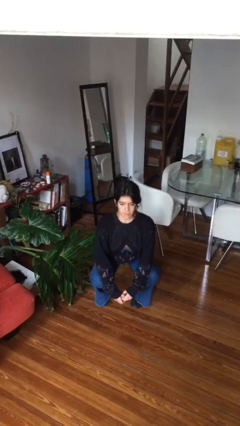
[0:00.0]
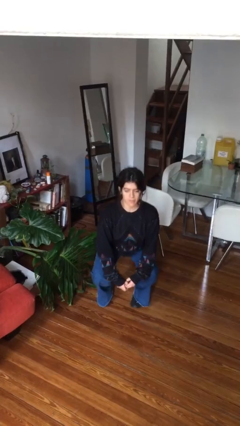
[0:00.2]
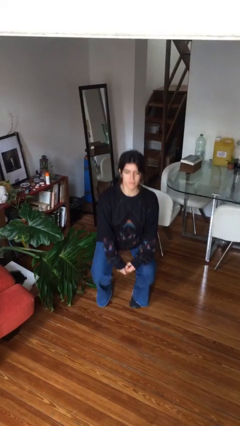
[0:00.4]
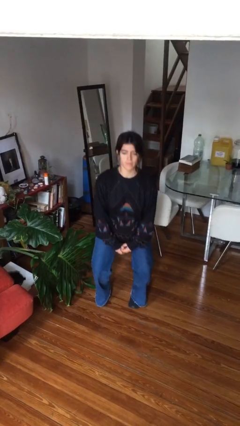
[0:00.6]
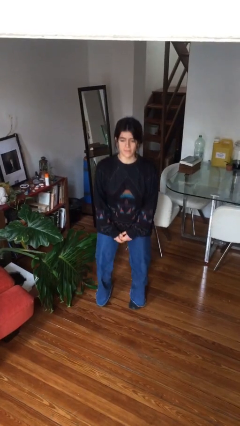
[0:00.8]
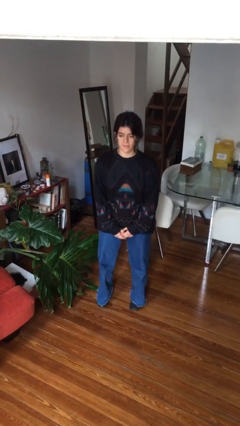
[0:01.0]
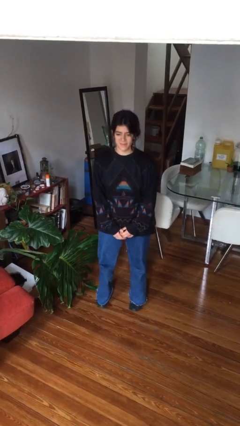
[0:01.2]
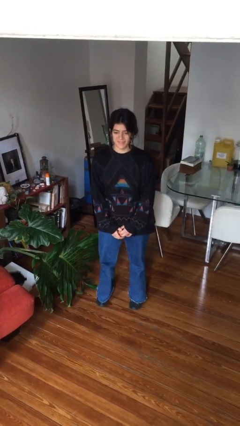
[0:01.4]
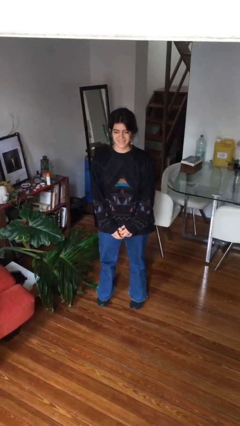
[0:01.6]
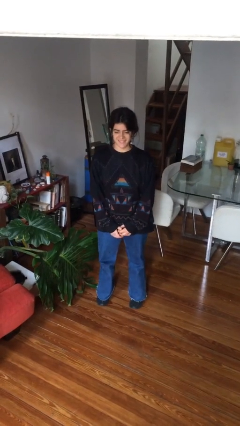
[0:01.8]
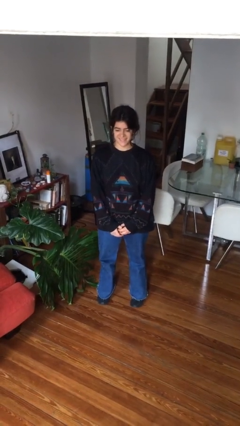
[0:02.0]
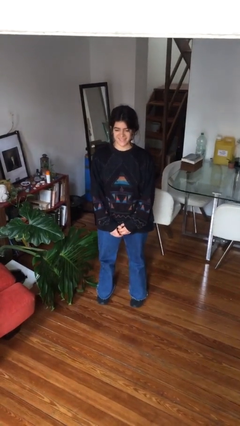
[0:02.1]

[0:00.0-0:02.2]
person stands up

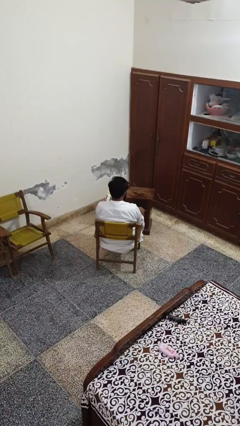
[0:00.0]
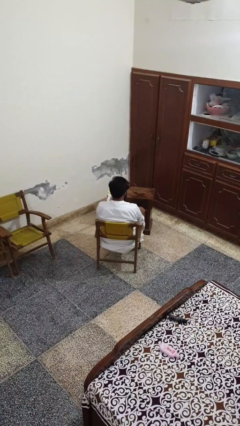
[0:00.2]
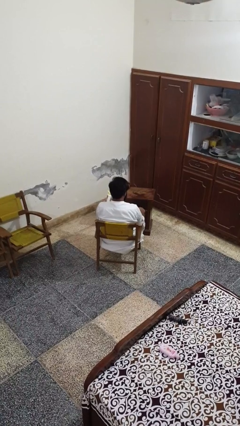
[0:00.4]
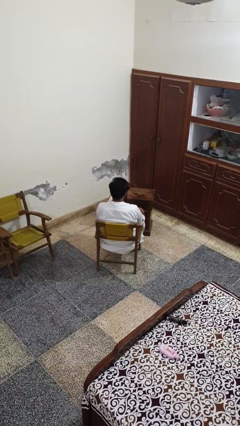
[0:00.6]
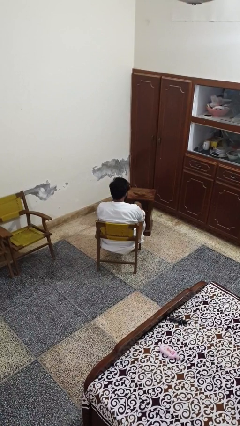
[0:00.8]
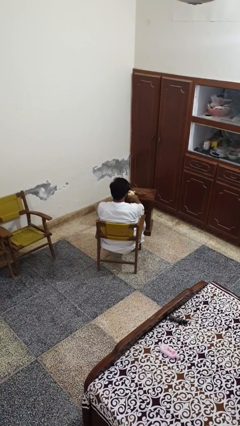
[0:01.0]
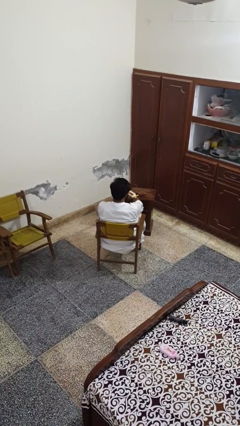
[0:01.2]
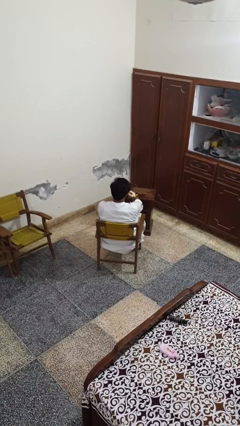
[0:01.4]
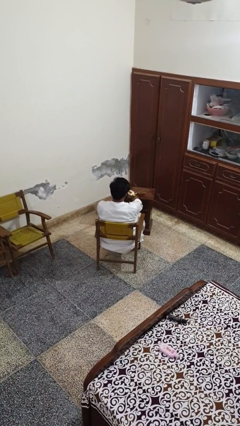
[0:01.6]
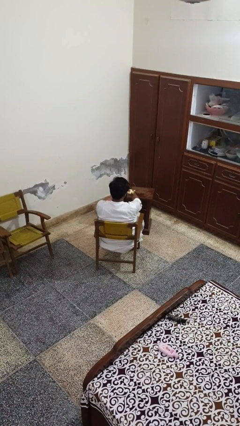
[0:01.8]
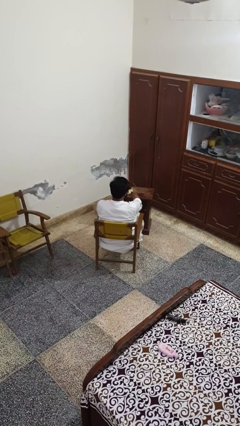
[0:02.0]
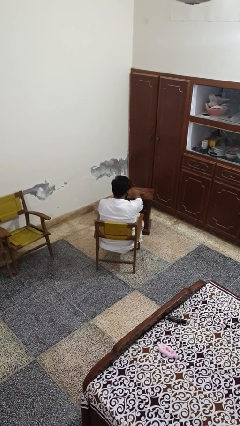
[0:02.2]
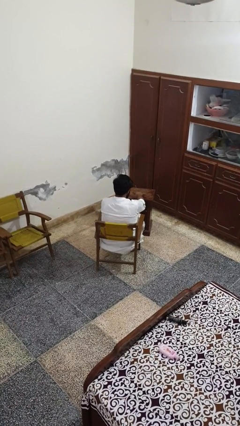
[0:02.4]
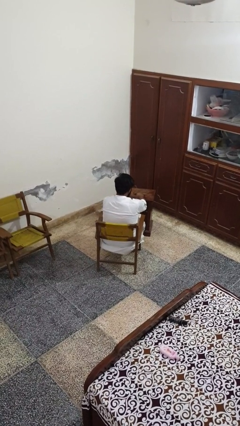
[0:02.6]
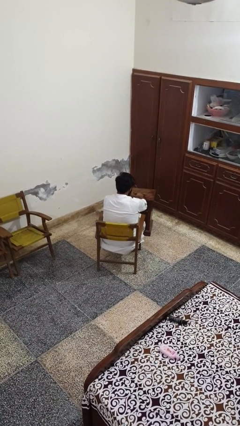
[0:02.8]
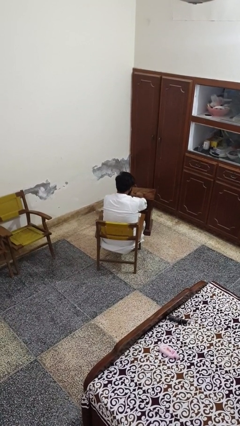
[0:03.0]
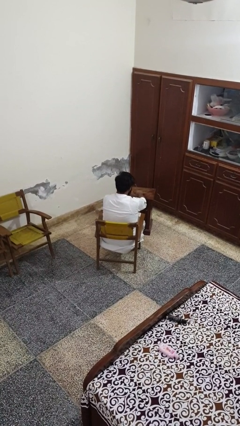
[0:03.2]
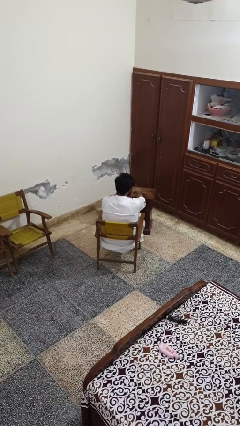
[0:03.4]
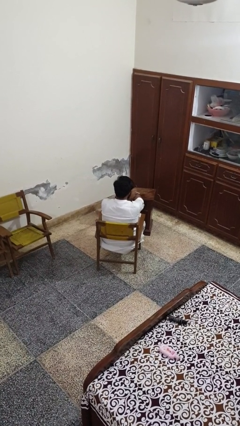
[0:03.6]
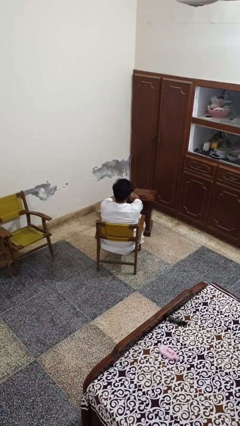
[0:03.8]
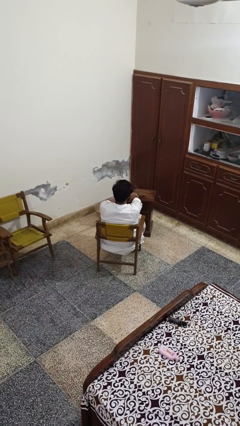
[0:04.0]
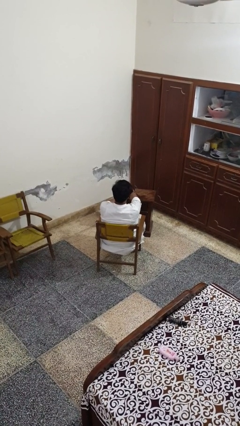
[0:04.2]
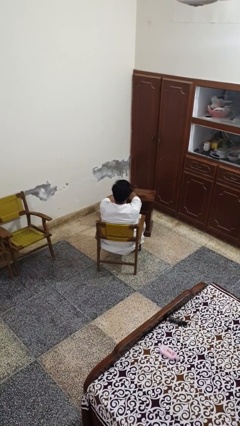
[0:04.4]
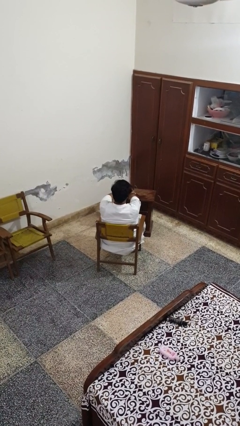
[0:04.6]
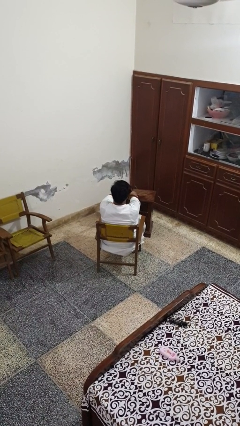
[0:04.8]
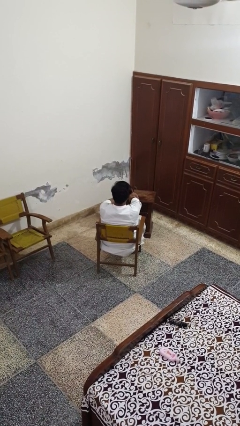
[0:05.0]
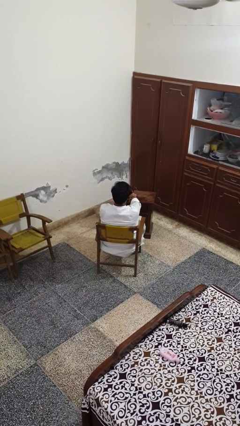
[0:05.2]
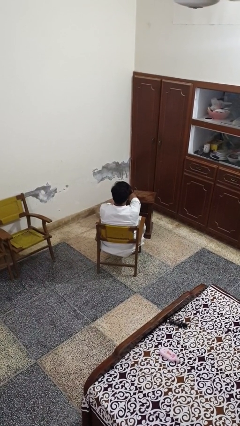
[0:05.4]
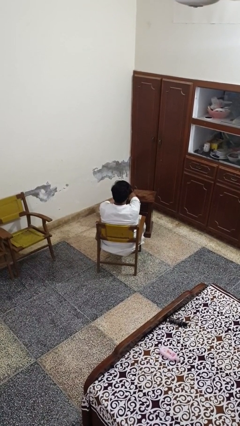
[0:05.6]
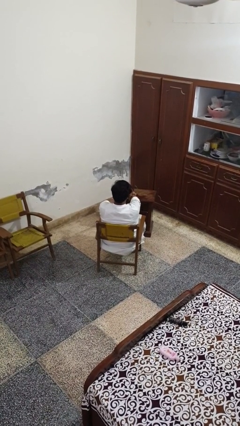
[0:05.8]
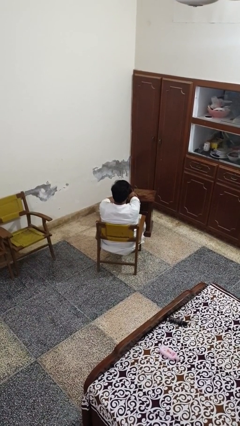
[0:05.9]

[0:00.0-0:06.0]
person applies sunscreen

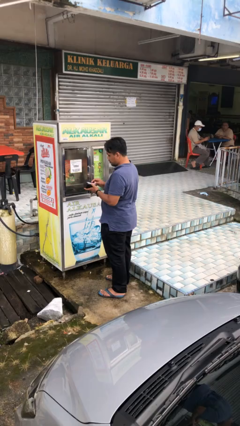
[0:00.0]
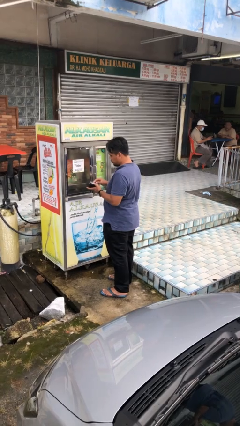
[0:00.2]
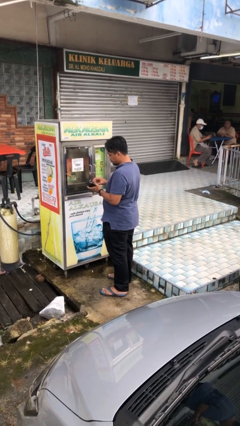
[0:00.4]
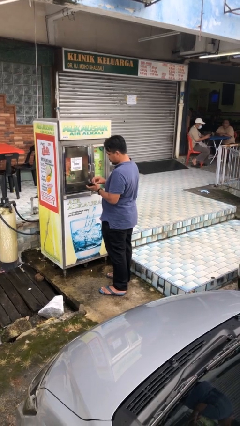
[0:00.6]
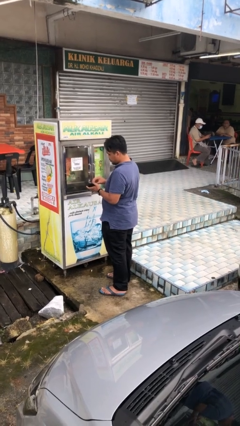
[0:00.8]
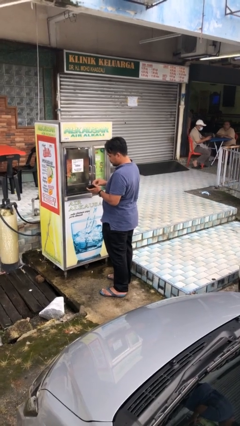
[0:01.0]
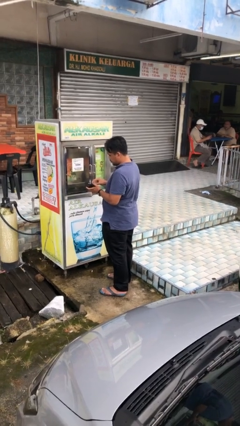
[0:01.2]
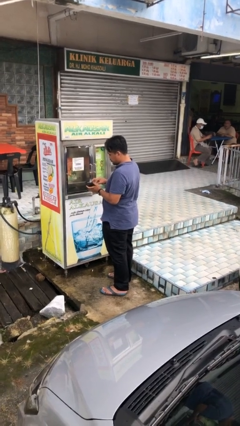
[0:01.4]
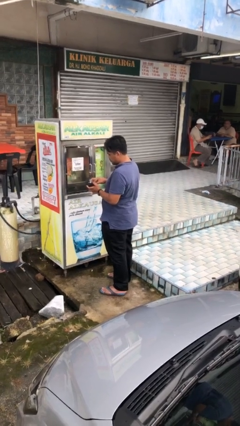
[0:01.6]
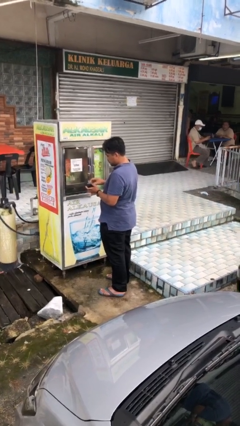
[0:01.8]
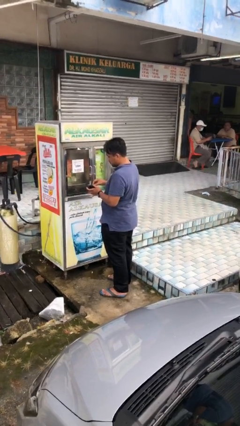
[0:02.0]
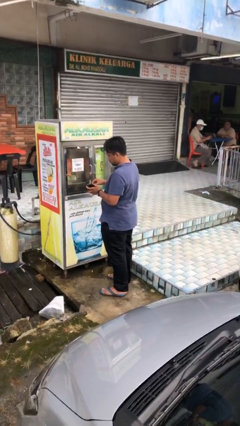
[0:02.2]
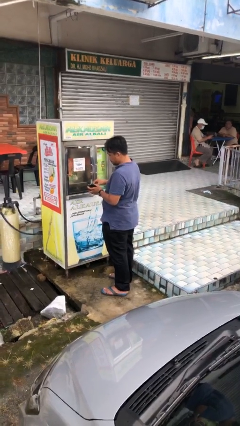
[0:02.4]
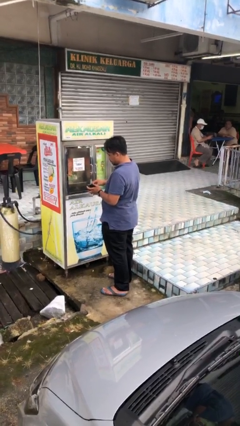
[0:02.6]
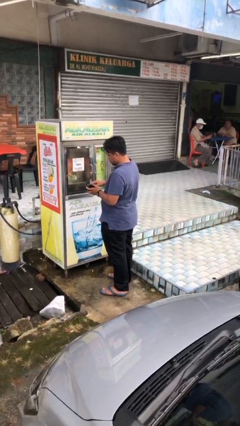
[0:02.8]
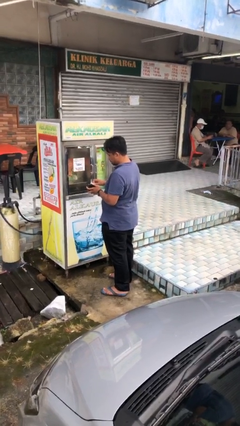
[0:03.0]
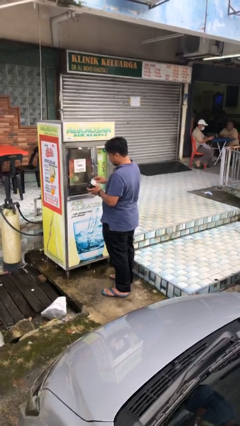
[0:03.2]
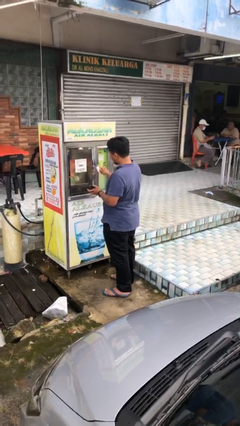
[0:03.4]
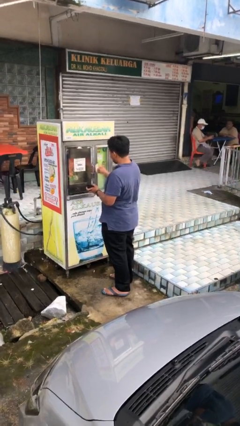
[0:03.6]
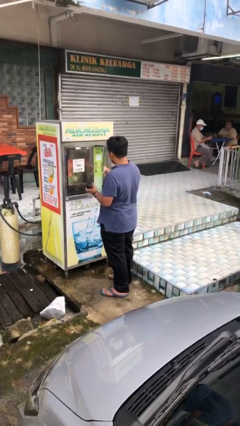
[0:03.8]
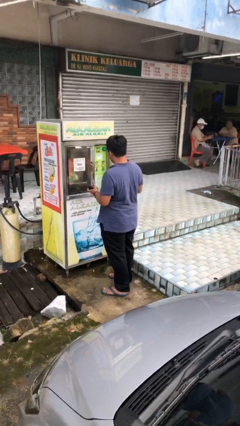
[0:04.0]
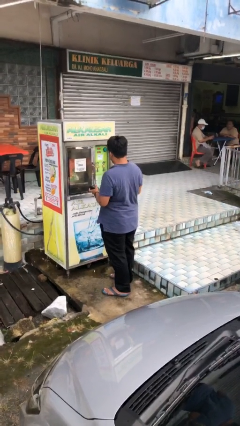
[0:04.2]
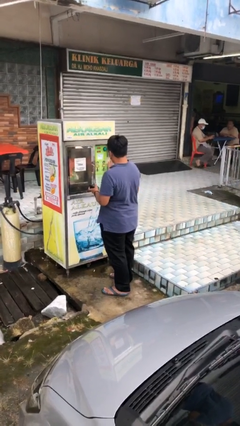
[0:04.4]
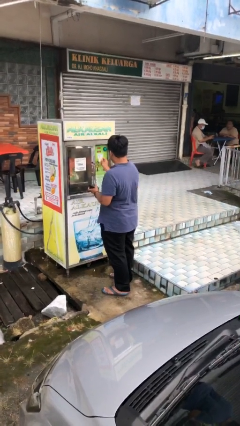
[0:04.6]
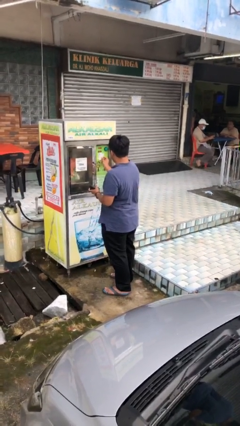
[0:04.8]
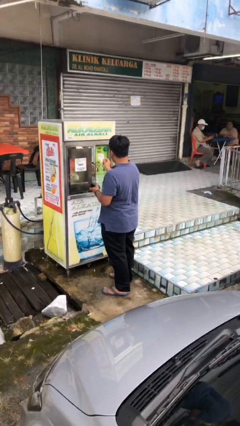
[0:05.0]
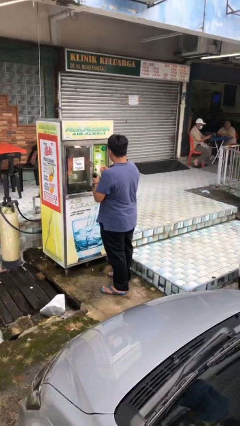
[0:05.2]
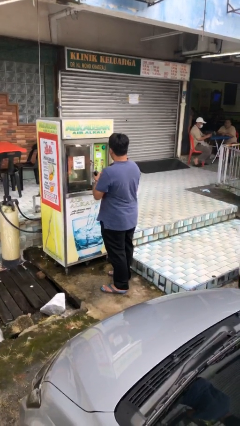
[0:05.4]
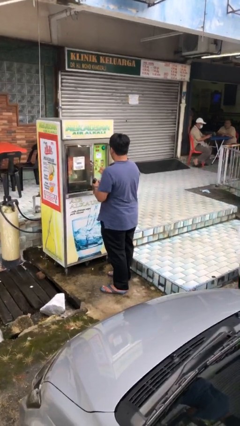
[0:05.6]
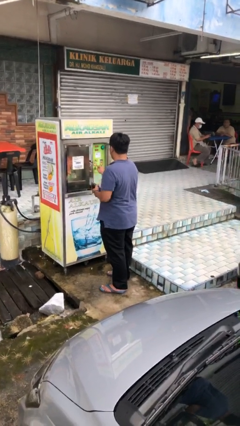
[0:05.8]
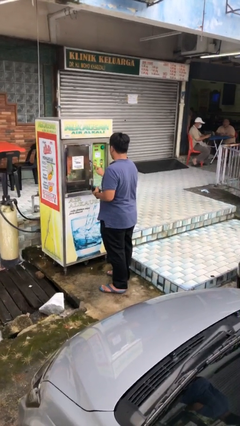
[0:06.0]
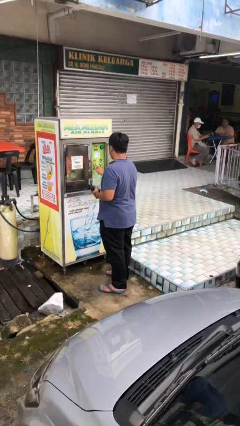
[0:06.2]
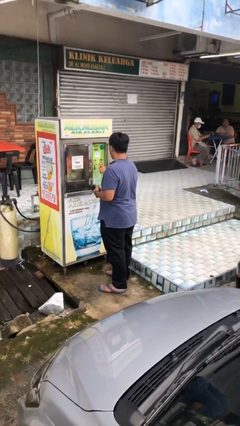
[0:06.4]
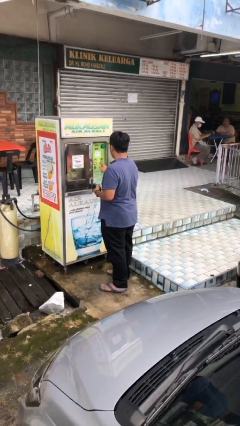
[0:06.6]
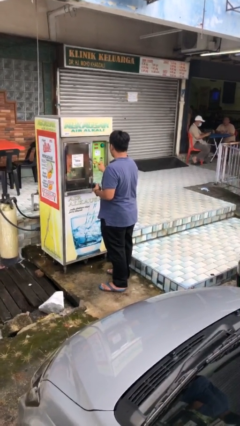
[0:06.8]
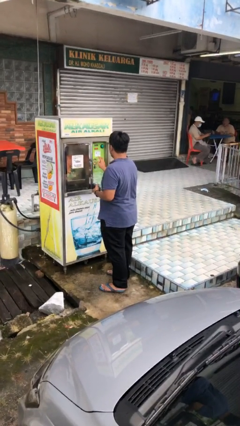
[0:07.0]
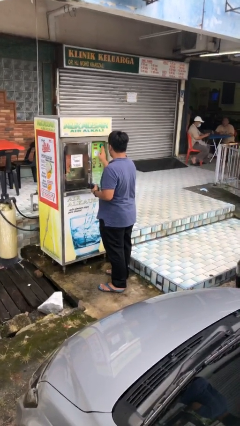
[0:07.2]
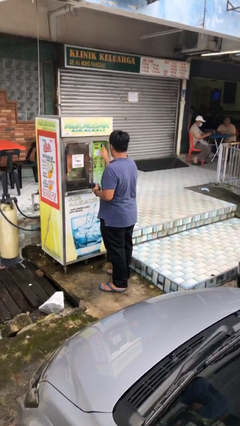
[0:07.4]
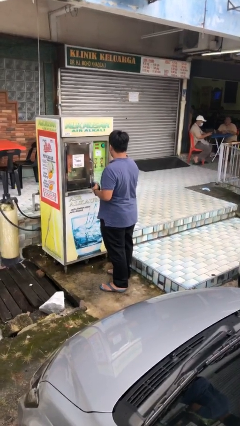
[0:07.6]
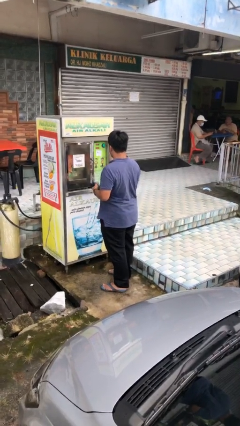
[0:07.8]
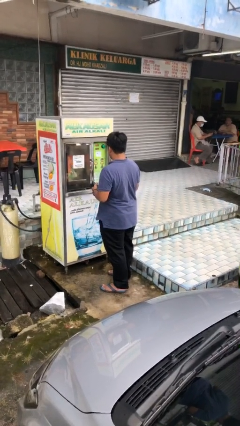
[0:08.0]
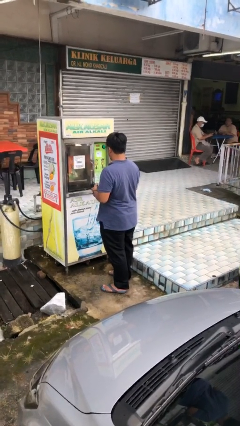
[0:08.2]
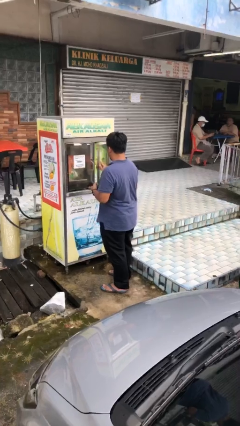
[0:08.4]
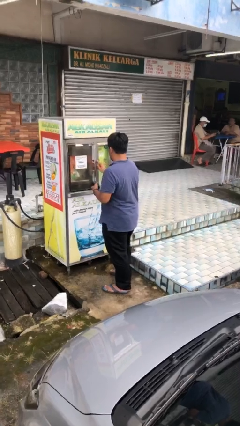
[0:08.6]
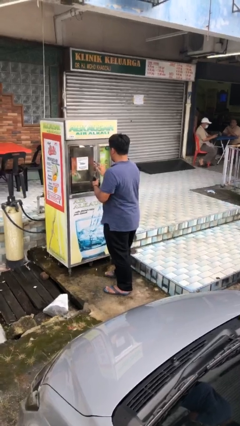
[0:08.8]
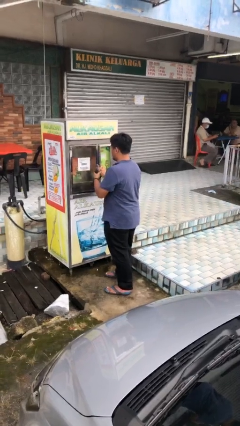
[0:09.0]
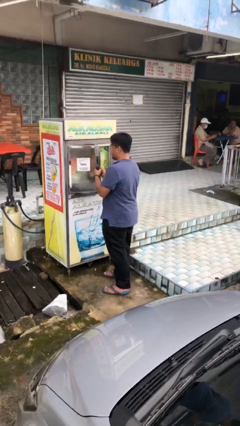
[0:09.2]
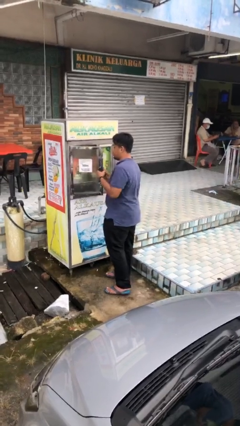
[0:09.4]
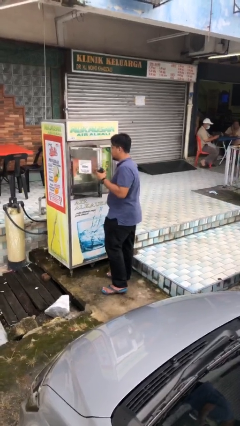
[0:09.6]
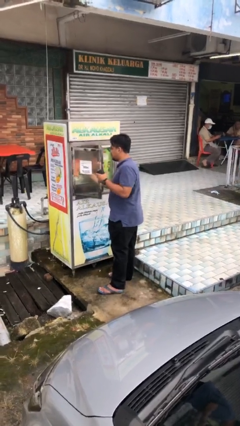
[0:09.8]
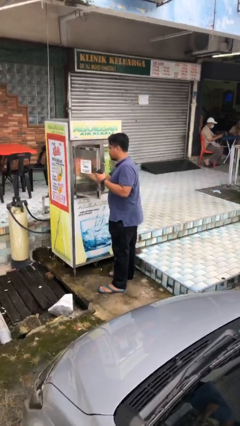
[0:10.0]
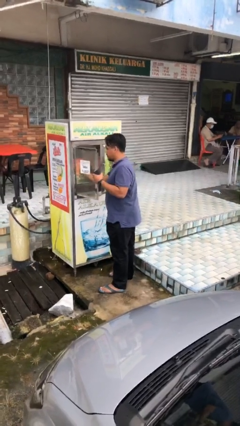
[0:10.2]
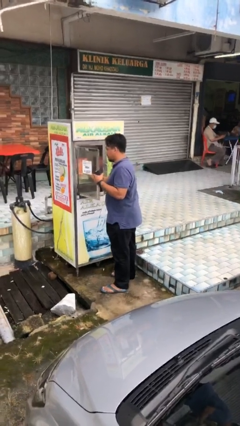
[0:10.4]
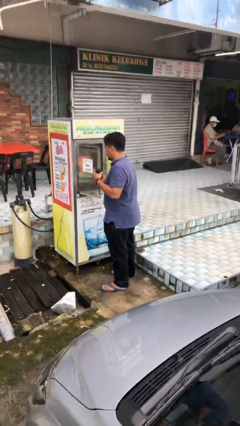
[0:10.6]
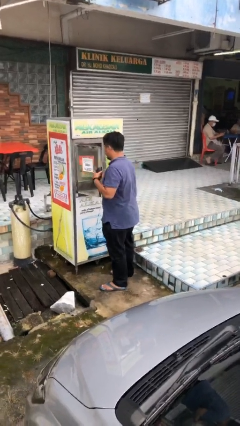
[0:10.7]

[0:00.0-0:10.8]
person purchases from machine
